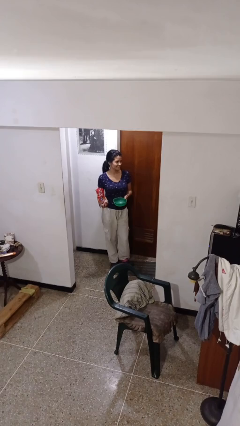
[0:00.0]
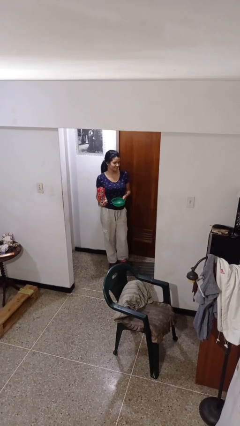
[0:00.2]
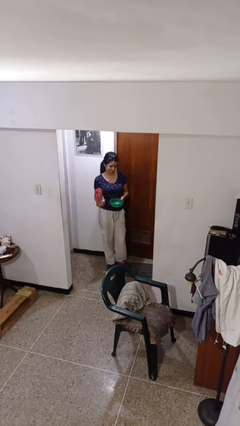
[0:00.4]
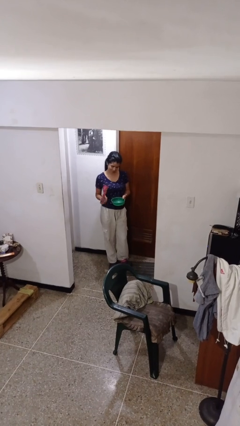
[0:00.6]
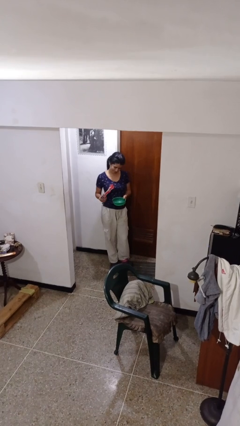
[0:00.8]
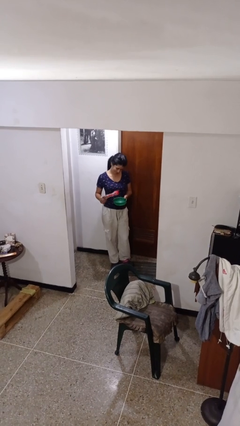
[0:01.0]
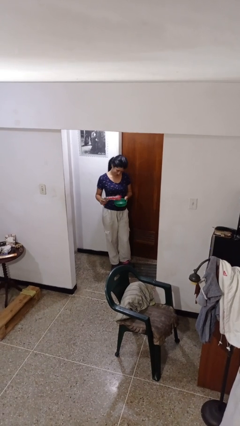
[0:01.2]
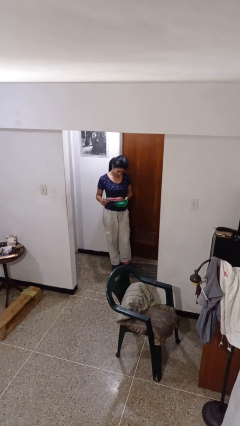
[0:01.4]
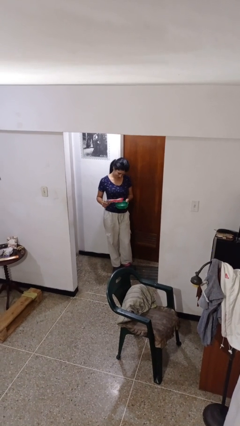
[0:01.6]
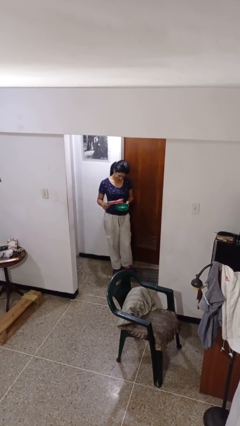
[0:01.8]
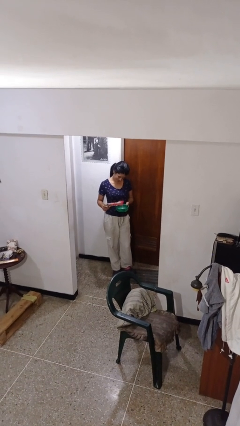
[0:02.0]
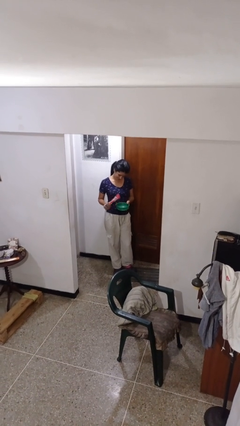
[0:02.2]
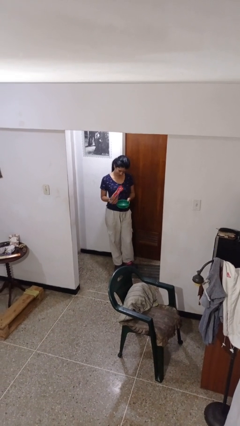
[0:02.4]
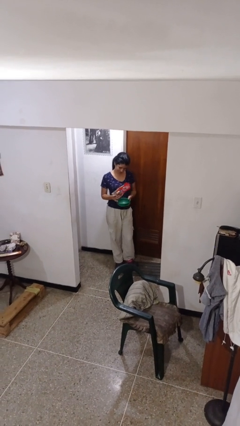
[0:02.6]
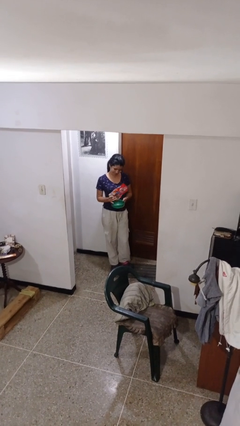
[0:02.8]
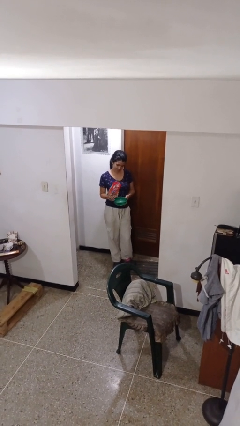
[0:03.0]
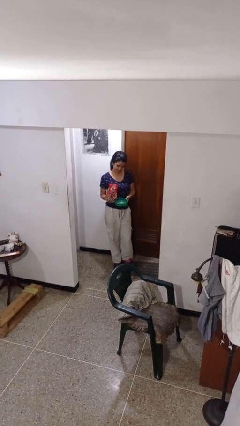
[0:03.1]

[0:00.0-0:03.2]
person pours into bowl

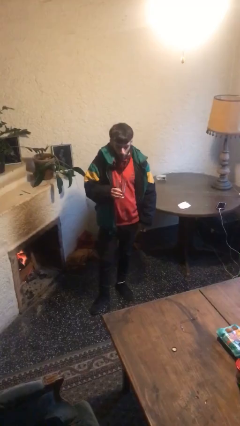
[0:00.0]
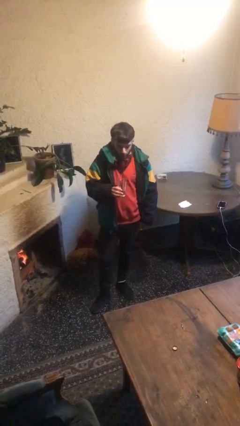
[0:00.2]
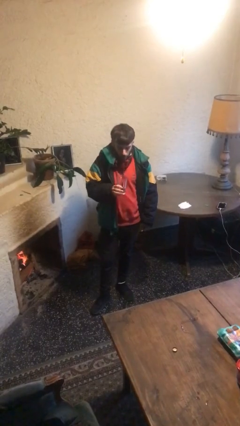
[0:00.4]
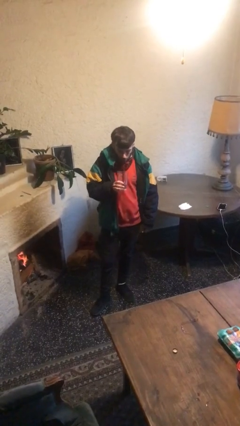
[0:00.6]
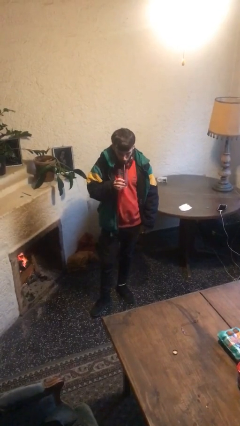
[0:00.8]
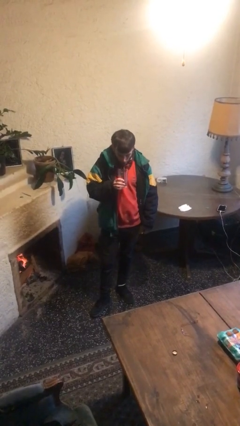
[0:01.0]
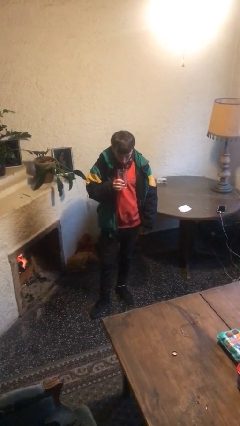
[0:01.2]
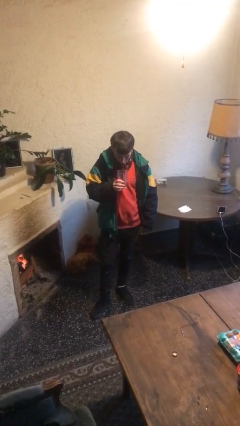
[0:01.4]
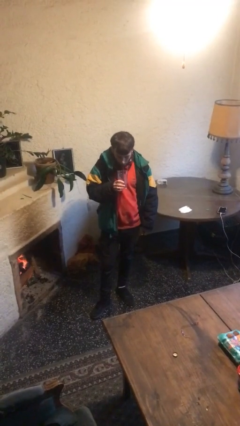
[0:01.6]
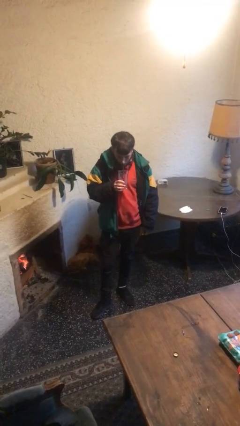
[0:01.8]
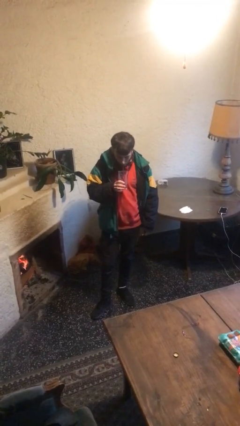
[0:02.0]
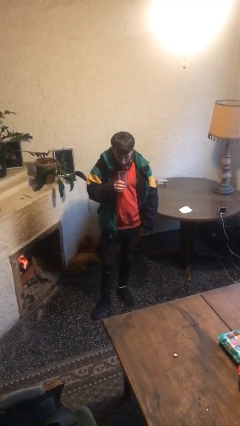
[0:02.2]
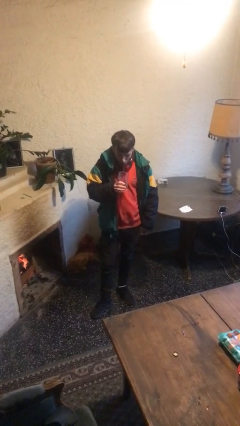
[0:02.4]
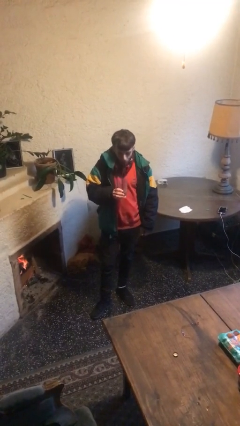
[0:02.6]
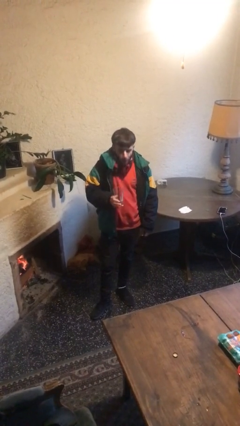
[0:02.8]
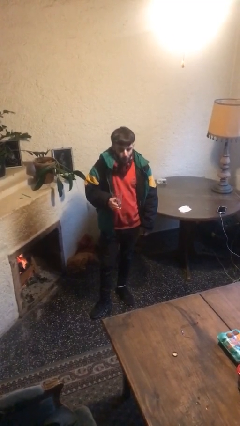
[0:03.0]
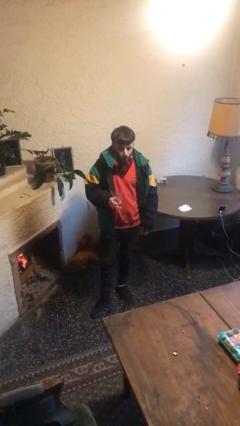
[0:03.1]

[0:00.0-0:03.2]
person drinks from straw

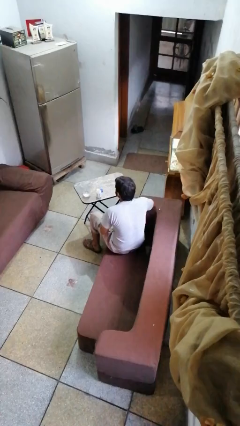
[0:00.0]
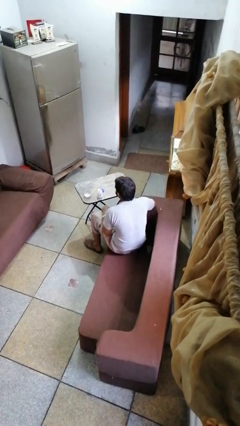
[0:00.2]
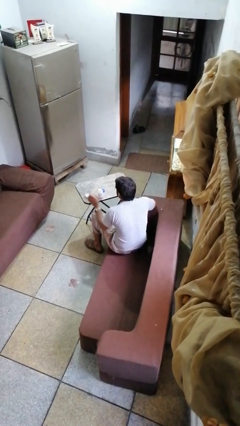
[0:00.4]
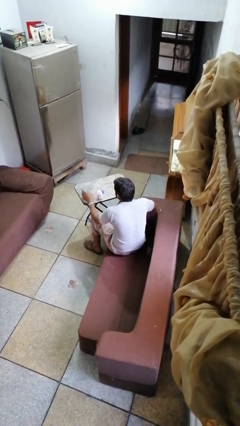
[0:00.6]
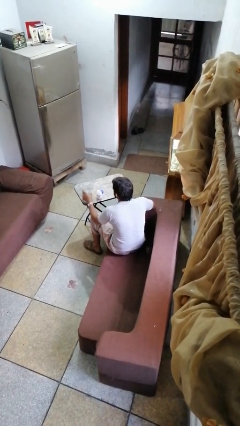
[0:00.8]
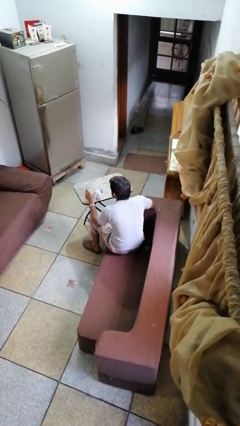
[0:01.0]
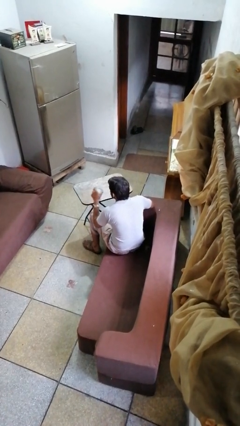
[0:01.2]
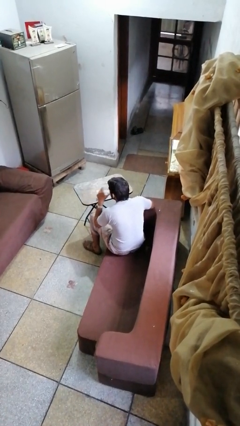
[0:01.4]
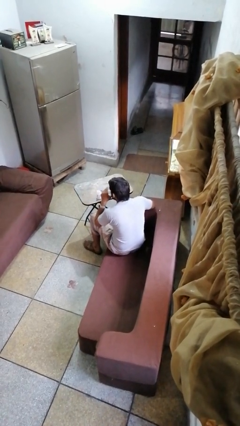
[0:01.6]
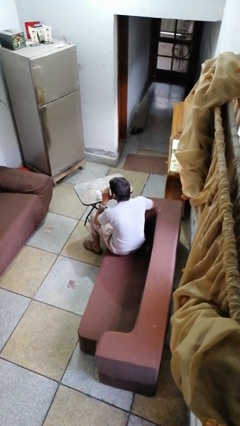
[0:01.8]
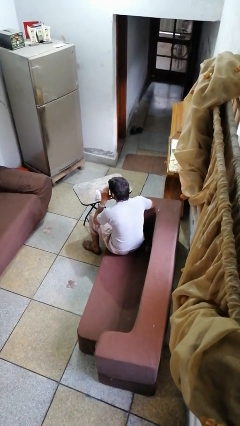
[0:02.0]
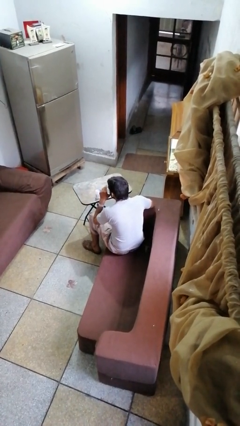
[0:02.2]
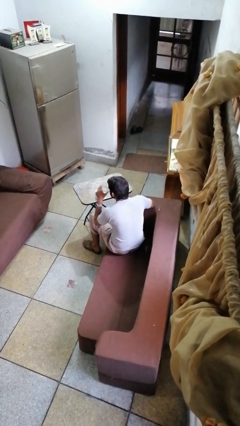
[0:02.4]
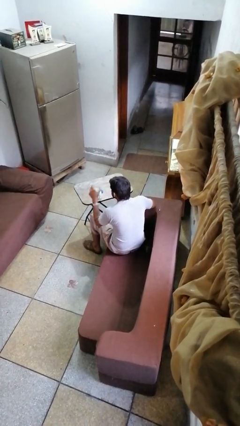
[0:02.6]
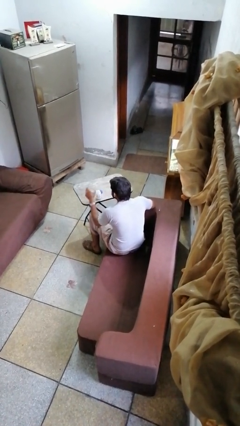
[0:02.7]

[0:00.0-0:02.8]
person drinks from cup

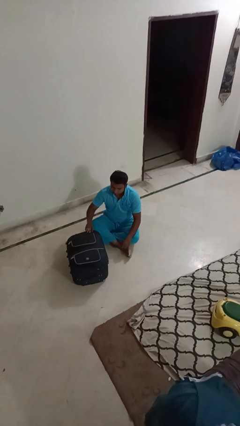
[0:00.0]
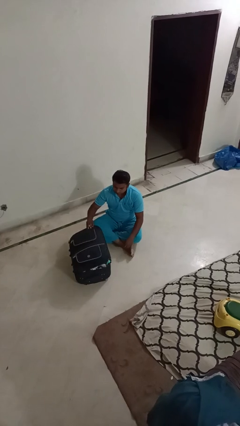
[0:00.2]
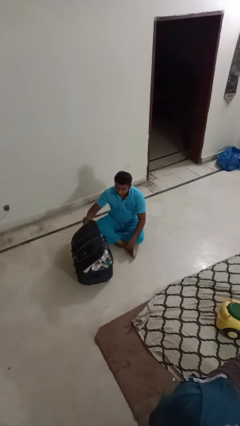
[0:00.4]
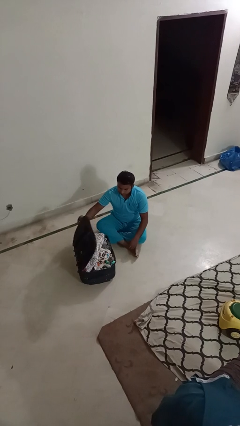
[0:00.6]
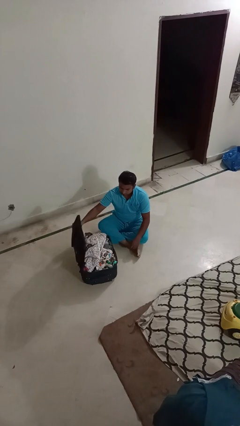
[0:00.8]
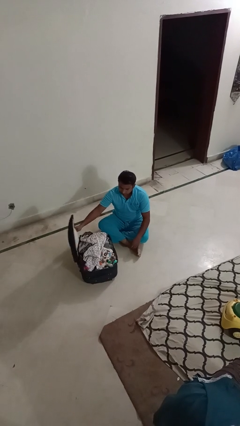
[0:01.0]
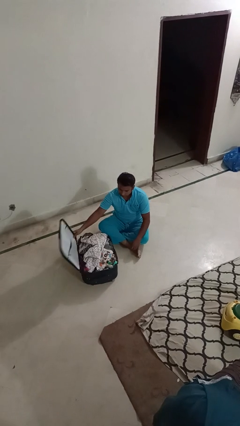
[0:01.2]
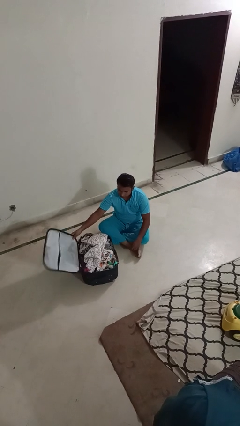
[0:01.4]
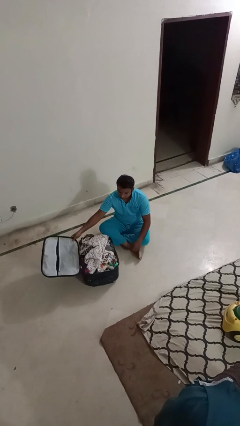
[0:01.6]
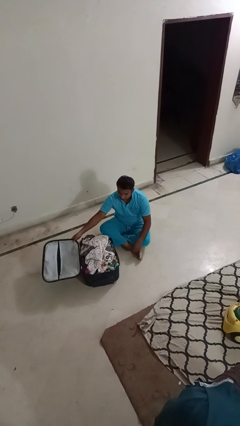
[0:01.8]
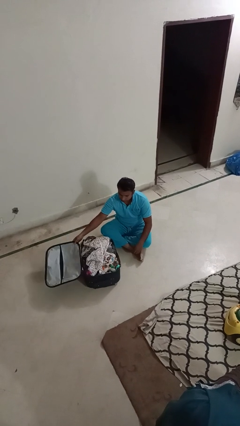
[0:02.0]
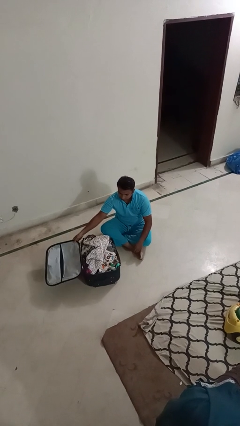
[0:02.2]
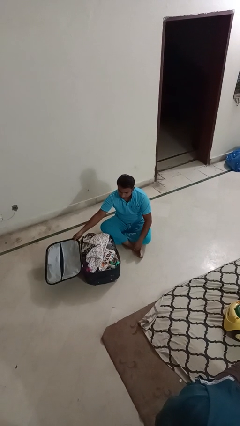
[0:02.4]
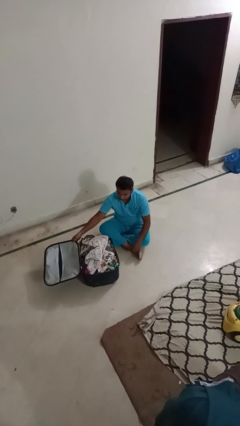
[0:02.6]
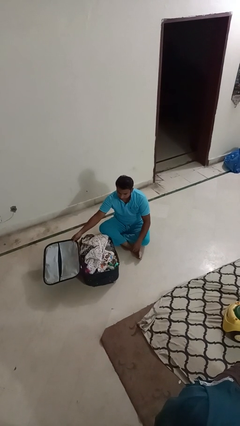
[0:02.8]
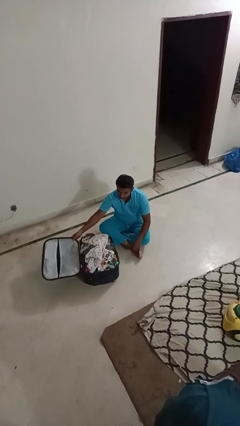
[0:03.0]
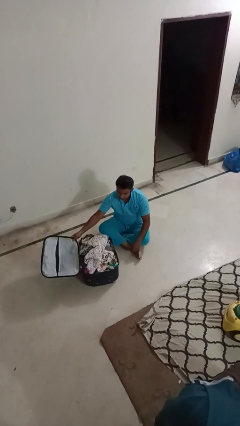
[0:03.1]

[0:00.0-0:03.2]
person opens suitcase

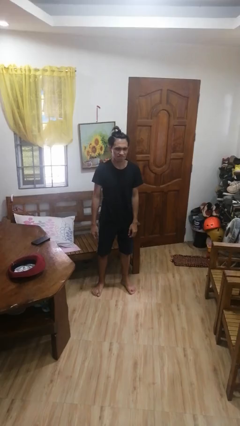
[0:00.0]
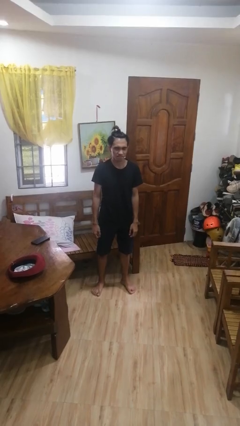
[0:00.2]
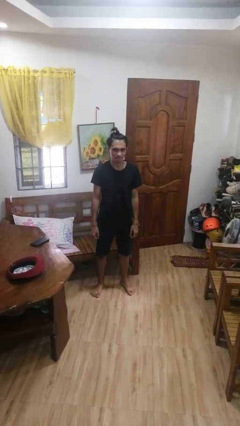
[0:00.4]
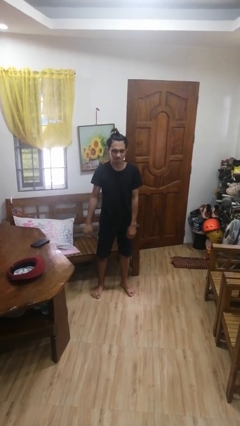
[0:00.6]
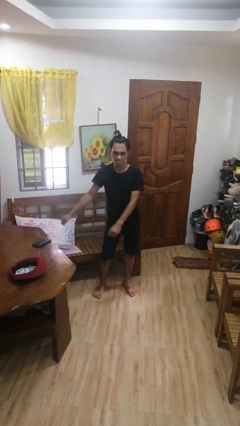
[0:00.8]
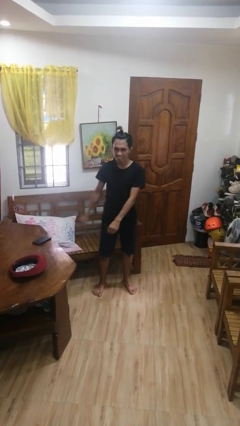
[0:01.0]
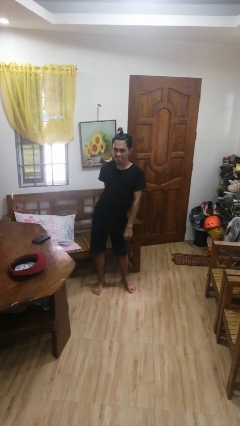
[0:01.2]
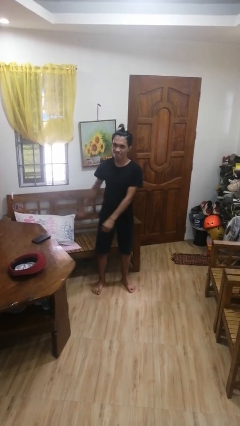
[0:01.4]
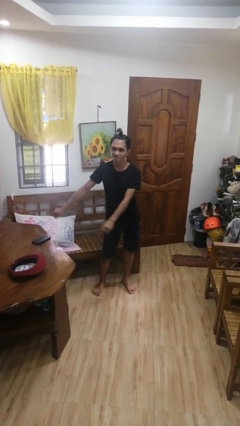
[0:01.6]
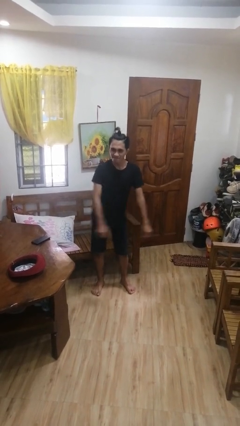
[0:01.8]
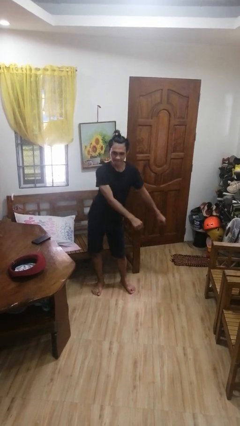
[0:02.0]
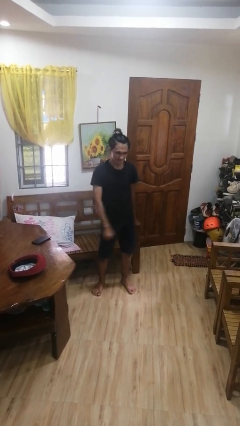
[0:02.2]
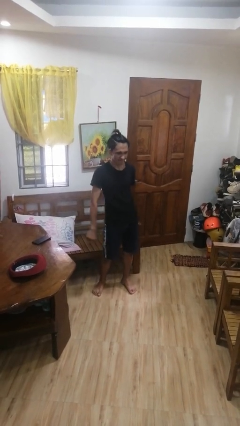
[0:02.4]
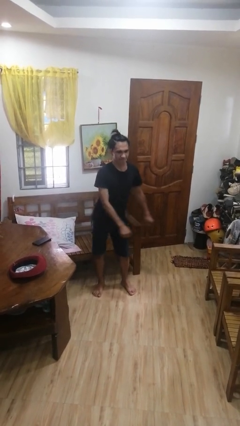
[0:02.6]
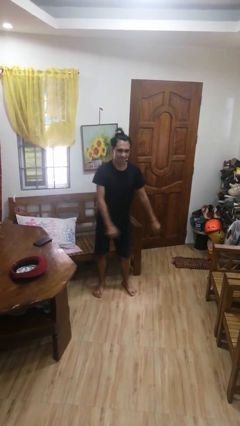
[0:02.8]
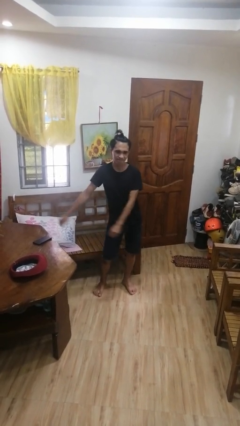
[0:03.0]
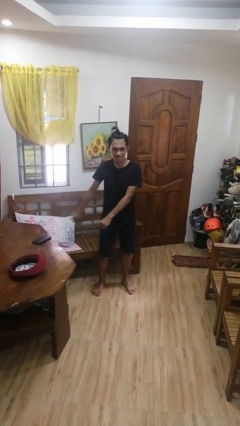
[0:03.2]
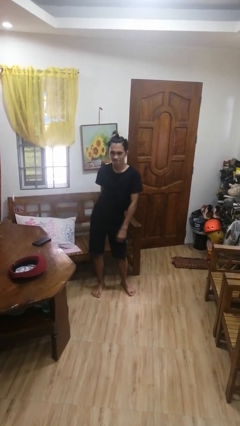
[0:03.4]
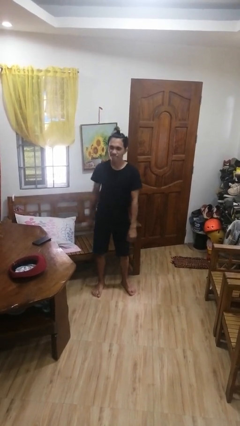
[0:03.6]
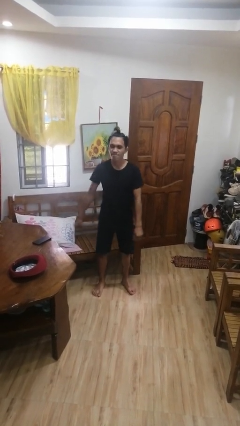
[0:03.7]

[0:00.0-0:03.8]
person dances in place

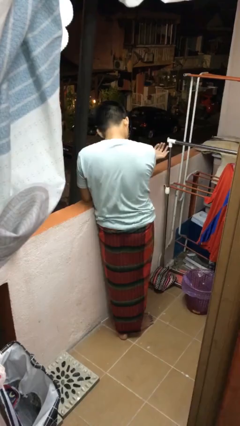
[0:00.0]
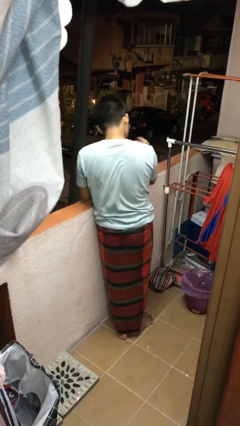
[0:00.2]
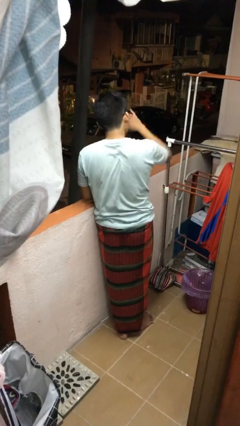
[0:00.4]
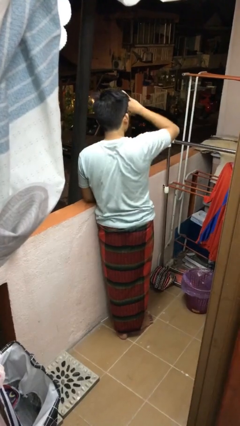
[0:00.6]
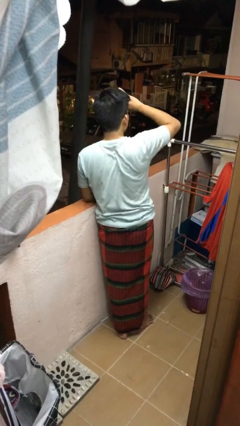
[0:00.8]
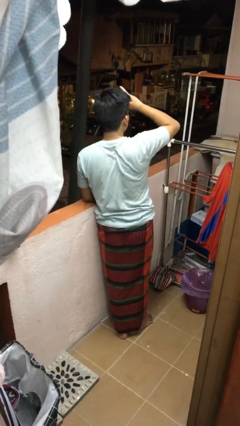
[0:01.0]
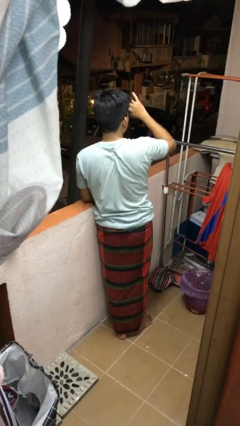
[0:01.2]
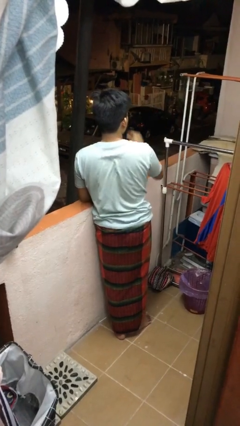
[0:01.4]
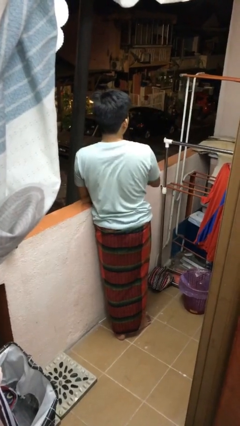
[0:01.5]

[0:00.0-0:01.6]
person shades eyes
